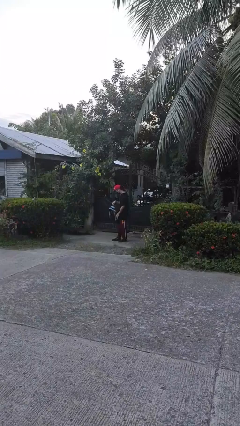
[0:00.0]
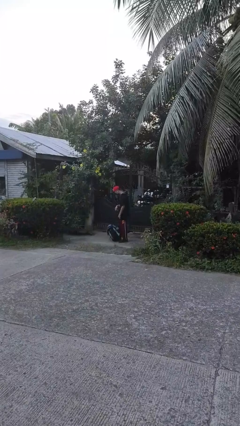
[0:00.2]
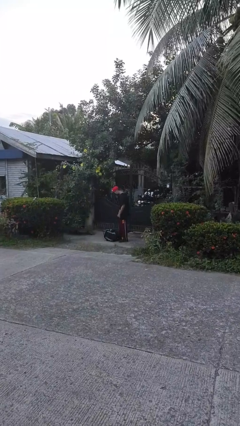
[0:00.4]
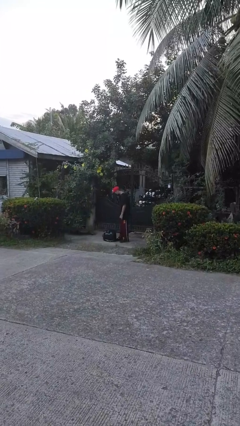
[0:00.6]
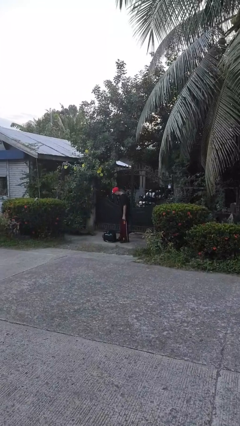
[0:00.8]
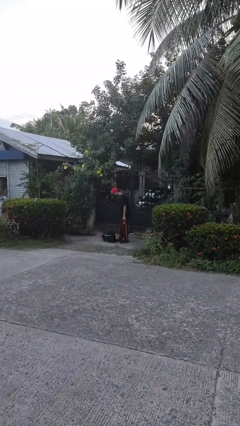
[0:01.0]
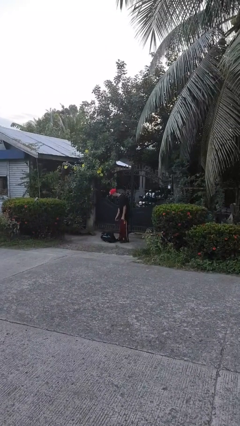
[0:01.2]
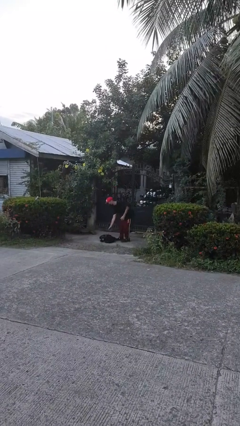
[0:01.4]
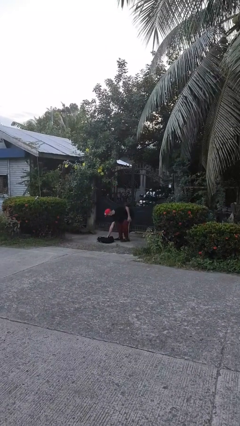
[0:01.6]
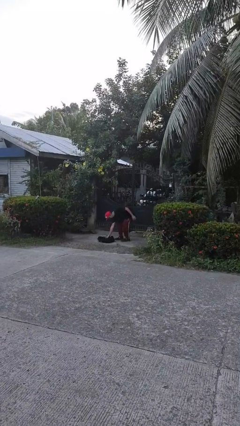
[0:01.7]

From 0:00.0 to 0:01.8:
person drops object

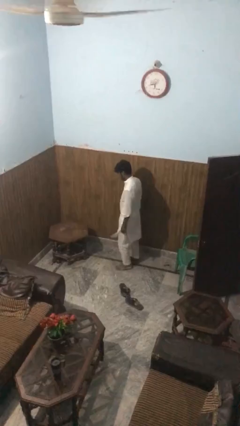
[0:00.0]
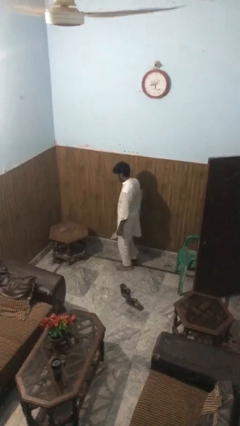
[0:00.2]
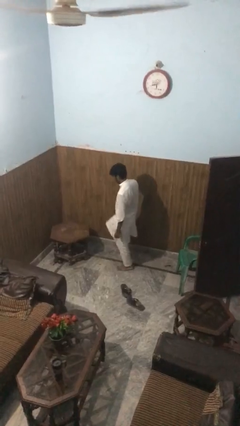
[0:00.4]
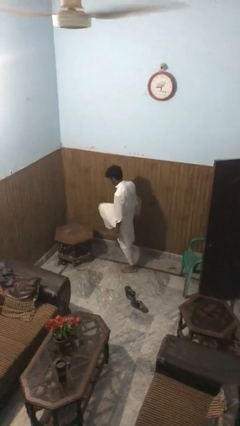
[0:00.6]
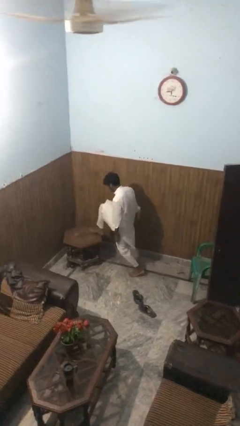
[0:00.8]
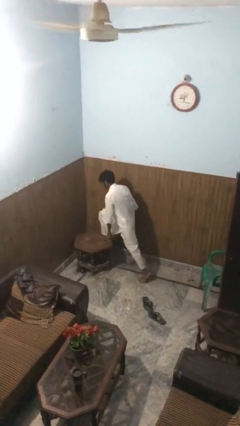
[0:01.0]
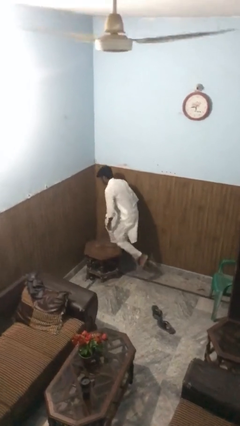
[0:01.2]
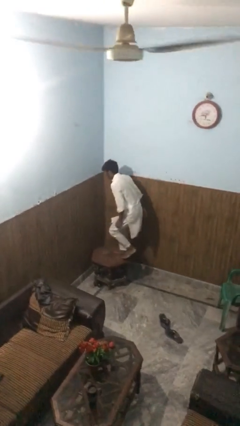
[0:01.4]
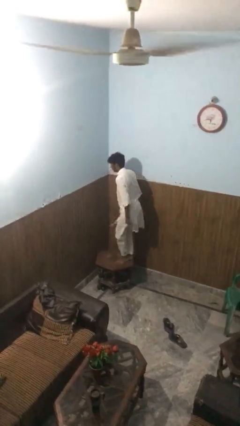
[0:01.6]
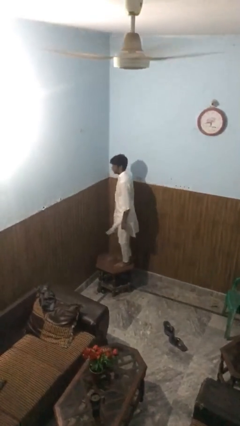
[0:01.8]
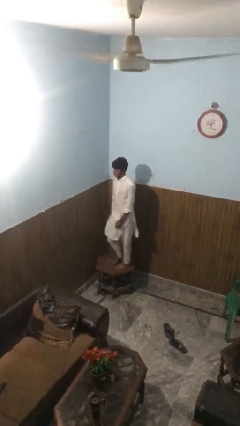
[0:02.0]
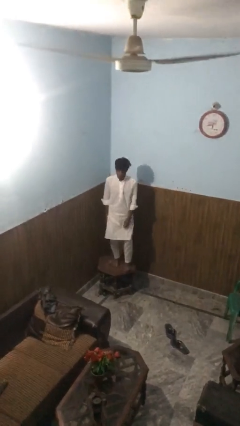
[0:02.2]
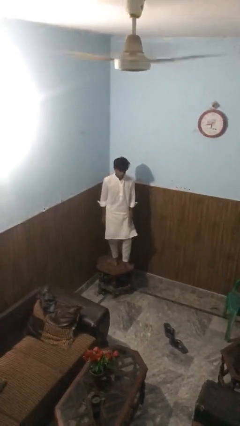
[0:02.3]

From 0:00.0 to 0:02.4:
person climbs on table

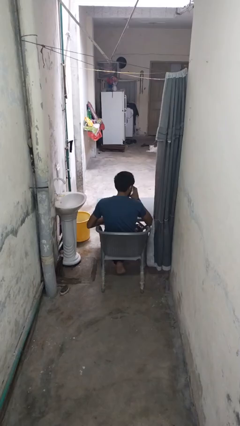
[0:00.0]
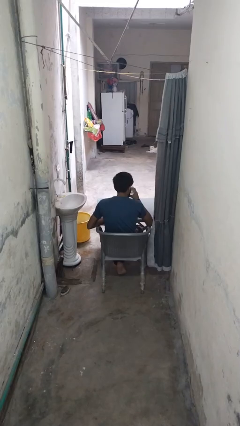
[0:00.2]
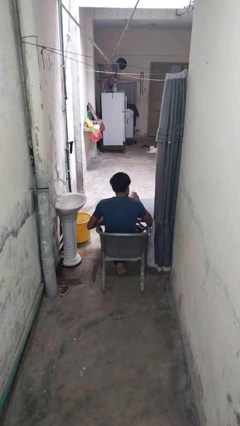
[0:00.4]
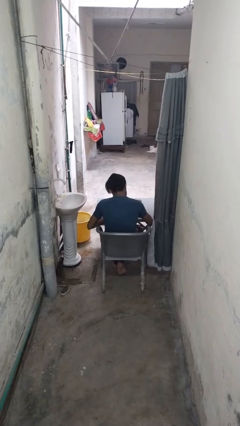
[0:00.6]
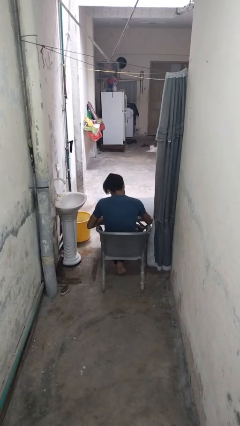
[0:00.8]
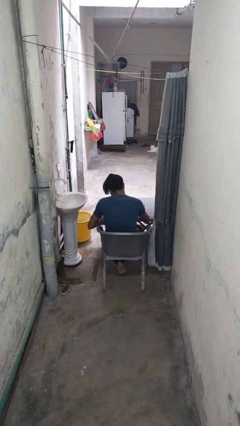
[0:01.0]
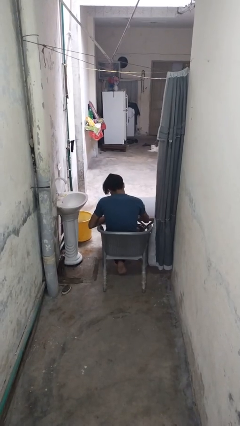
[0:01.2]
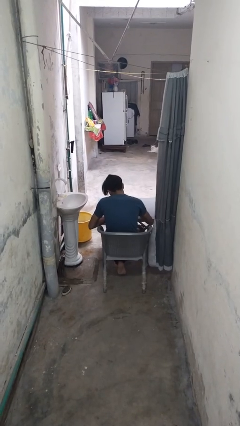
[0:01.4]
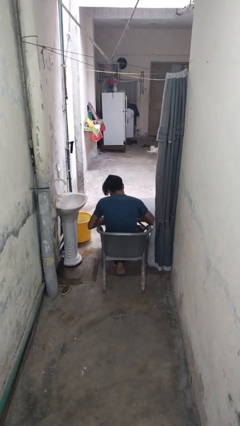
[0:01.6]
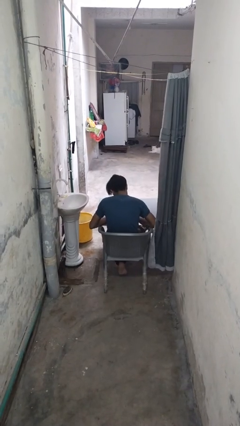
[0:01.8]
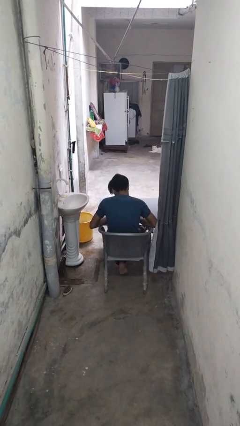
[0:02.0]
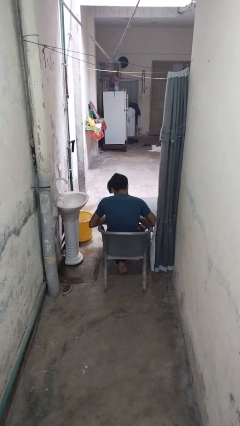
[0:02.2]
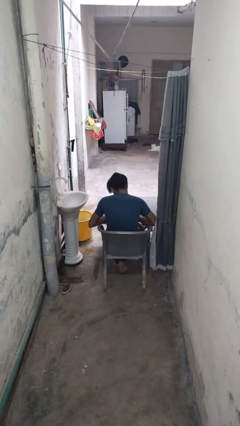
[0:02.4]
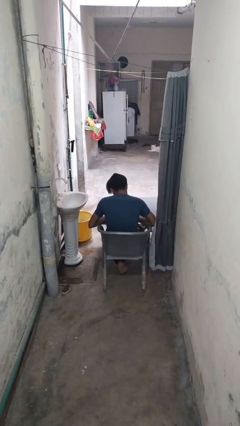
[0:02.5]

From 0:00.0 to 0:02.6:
person puts down object on table

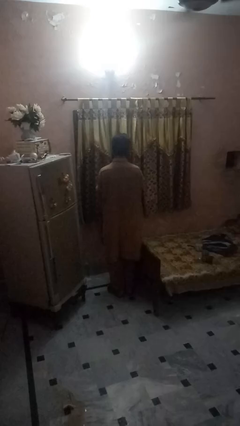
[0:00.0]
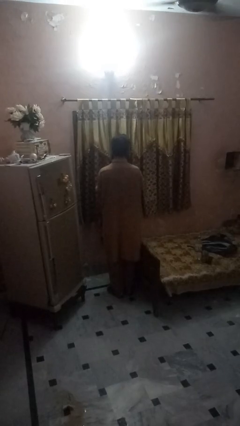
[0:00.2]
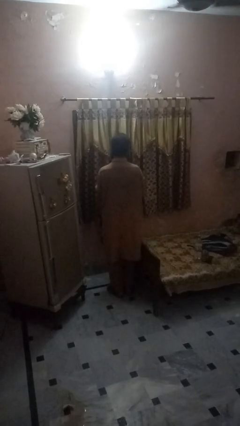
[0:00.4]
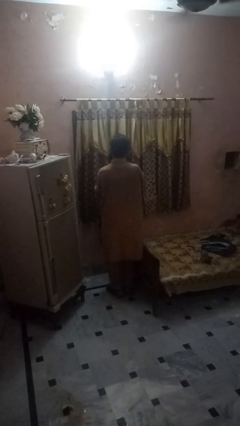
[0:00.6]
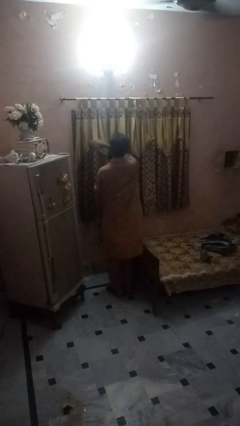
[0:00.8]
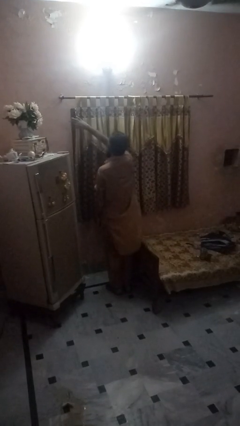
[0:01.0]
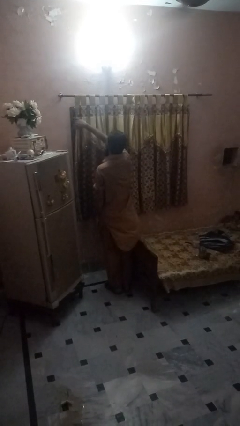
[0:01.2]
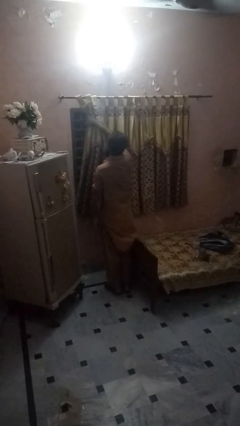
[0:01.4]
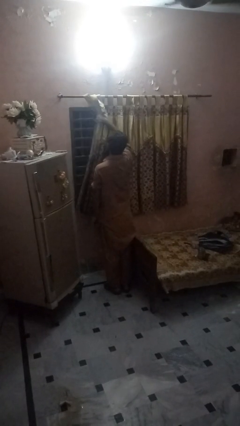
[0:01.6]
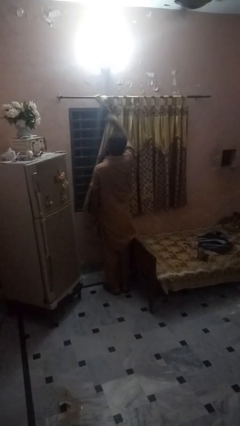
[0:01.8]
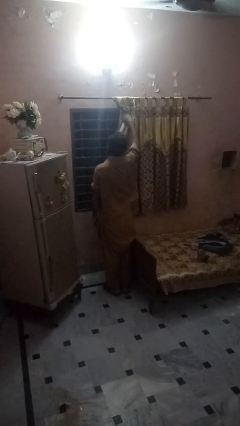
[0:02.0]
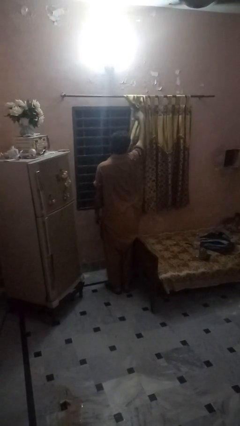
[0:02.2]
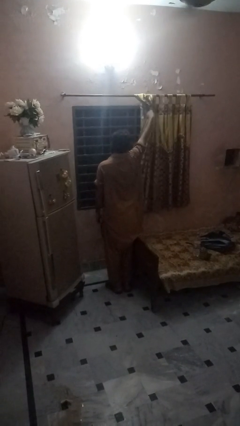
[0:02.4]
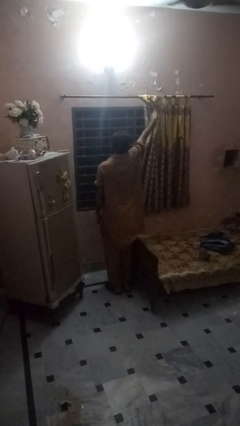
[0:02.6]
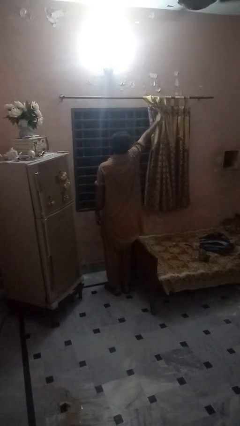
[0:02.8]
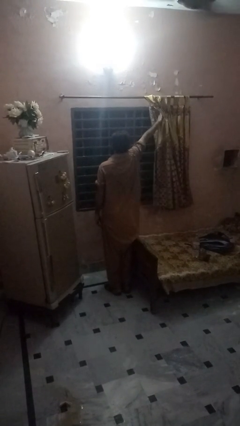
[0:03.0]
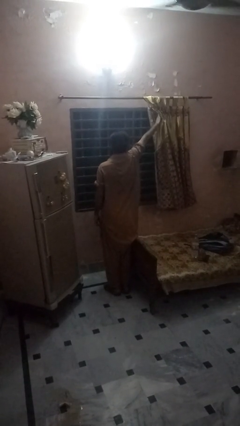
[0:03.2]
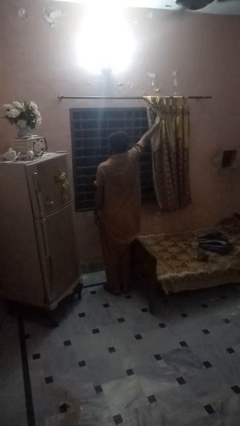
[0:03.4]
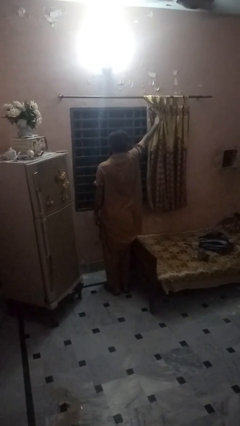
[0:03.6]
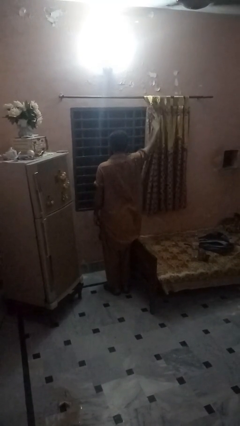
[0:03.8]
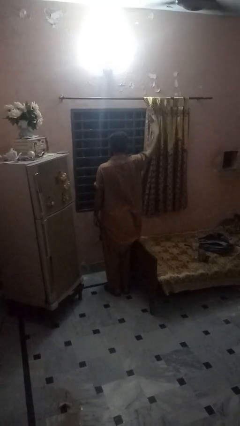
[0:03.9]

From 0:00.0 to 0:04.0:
person opens curtains

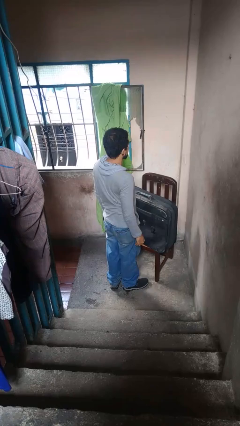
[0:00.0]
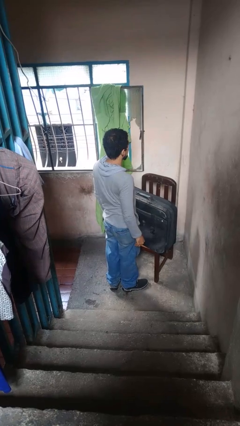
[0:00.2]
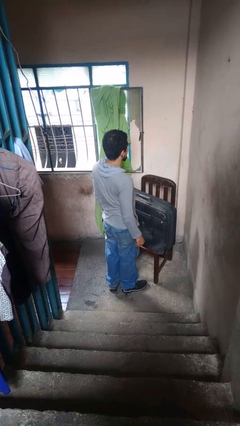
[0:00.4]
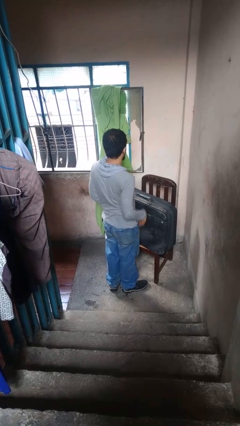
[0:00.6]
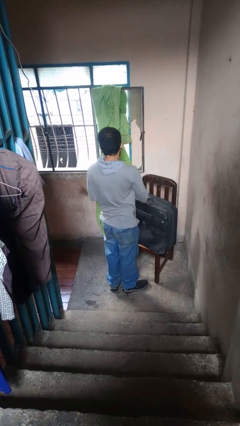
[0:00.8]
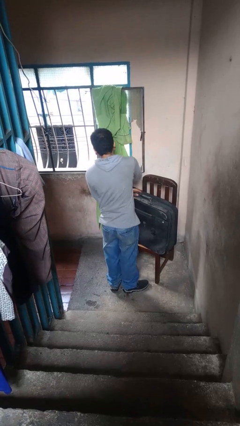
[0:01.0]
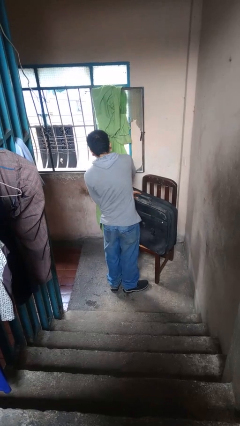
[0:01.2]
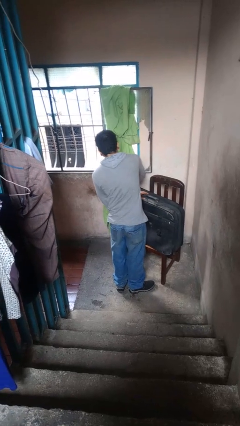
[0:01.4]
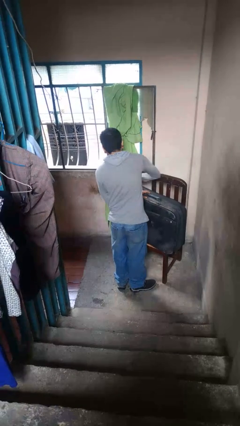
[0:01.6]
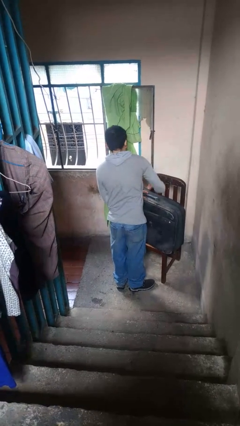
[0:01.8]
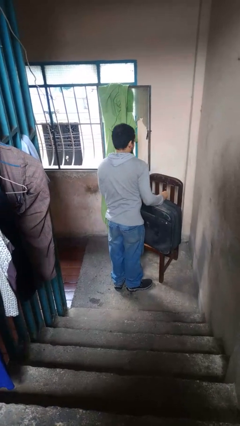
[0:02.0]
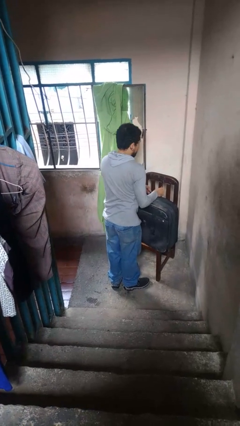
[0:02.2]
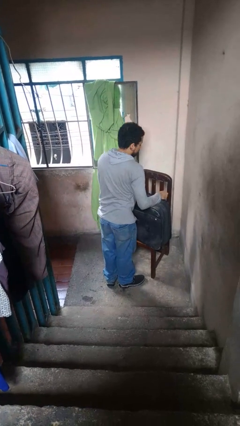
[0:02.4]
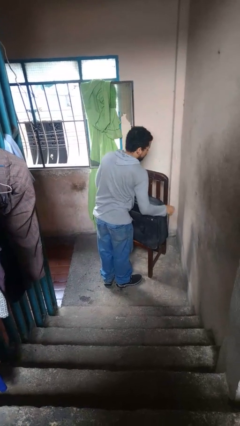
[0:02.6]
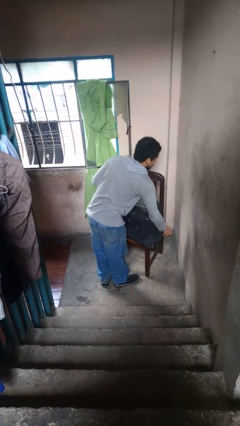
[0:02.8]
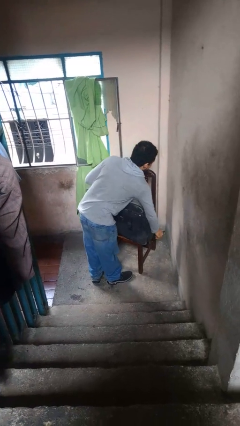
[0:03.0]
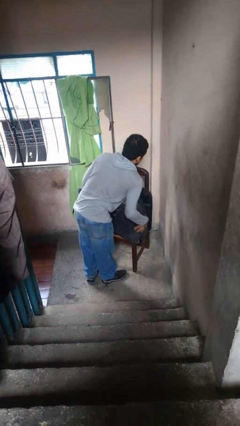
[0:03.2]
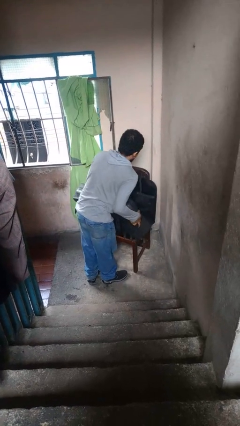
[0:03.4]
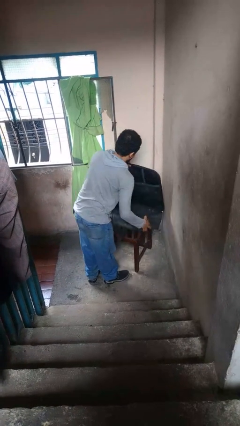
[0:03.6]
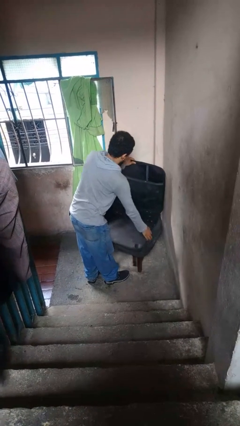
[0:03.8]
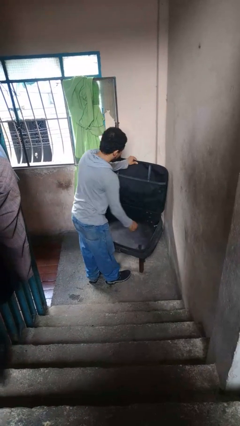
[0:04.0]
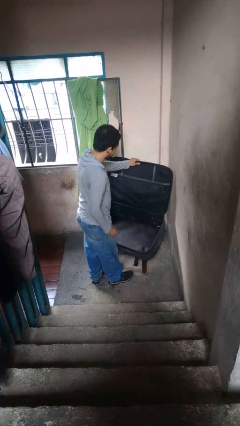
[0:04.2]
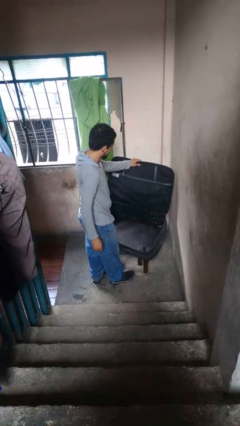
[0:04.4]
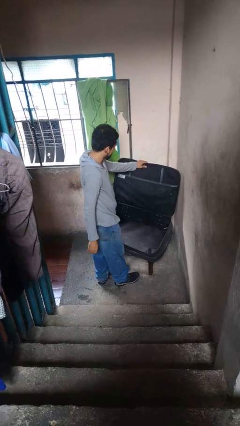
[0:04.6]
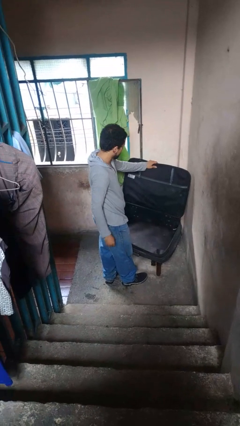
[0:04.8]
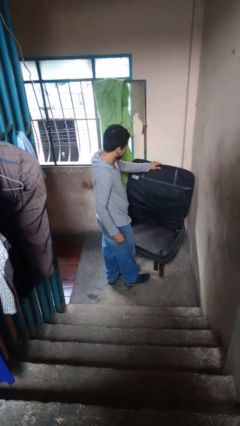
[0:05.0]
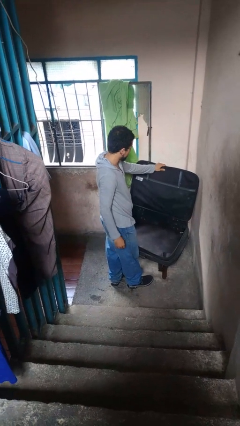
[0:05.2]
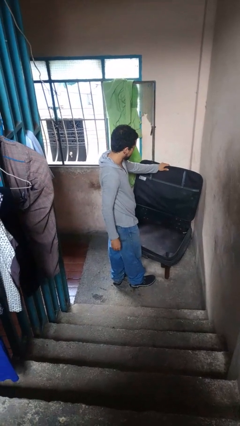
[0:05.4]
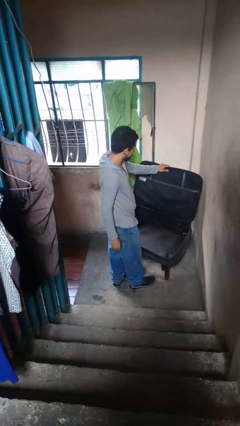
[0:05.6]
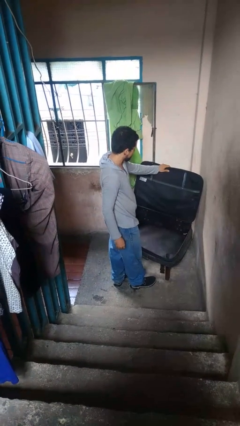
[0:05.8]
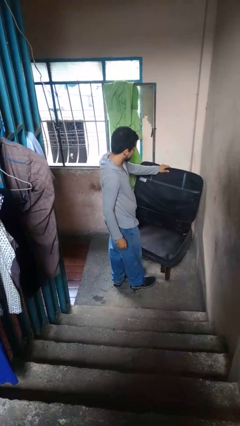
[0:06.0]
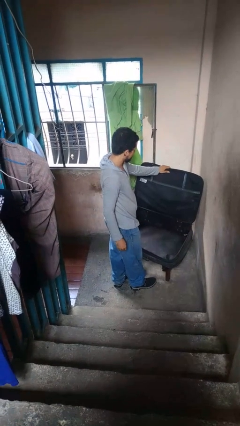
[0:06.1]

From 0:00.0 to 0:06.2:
person opens suitcase

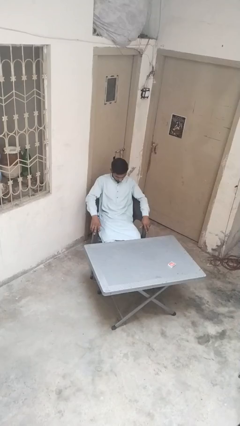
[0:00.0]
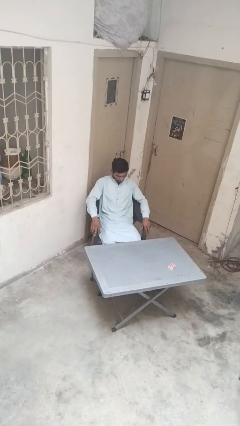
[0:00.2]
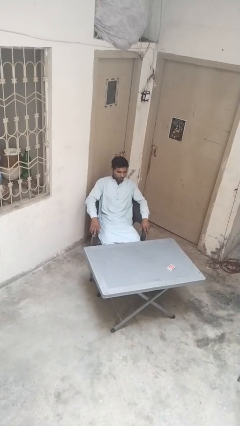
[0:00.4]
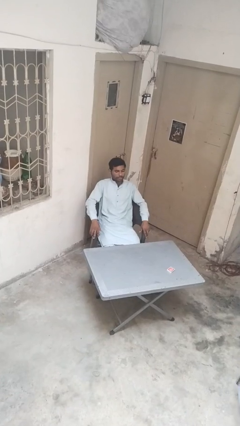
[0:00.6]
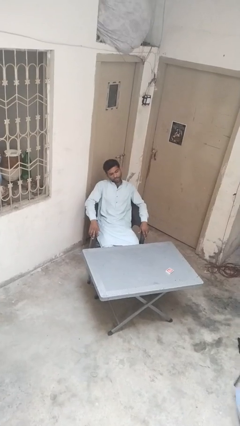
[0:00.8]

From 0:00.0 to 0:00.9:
person shakes head
